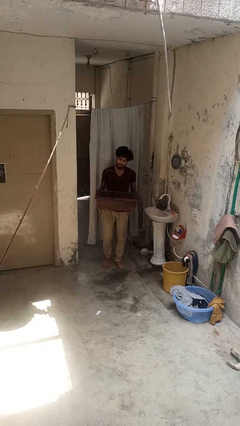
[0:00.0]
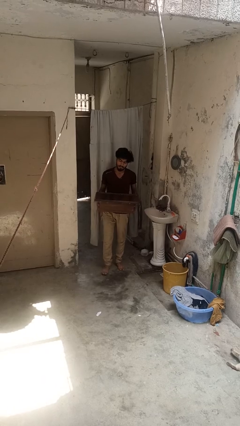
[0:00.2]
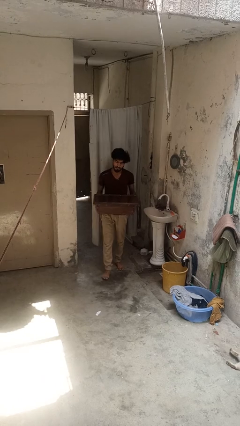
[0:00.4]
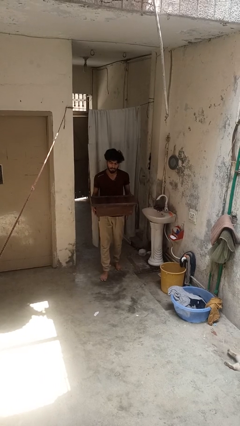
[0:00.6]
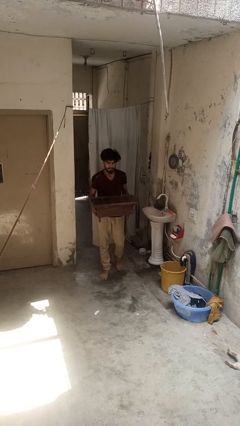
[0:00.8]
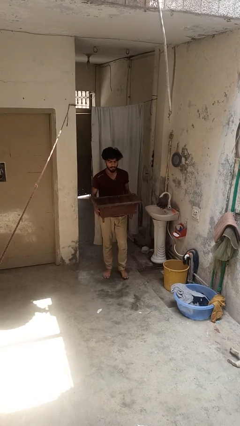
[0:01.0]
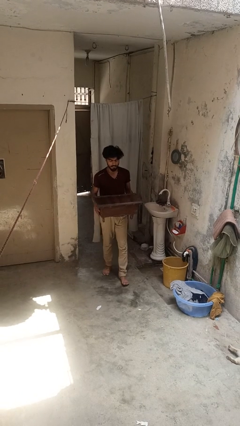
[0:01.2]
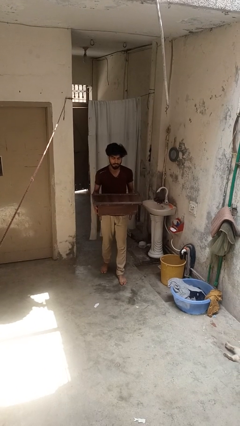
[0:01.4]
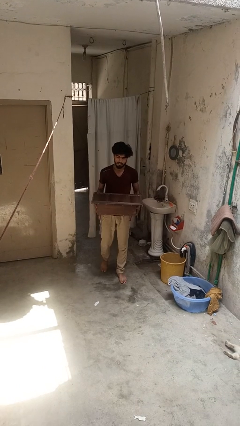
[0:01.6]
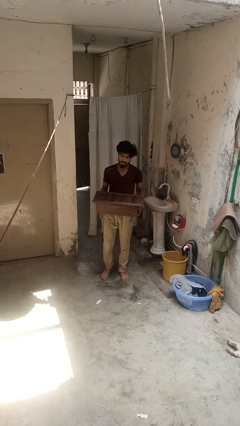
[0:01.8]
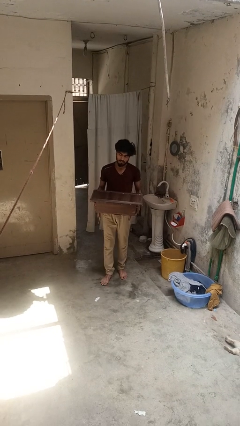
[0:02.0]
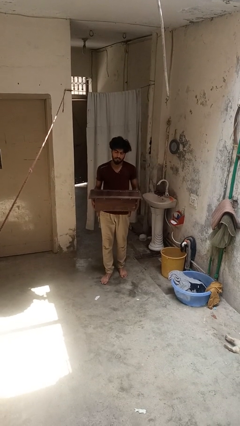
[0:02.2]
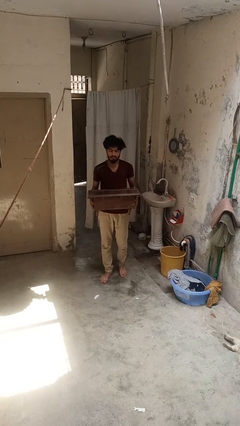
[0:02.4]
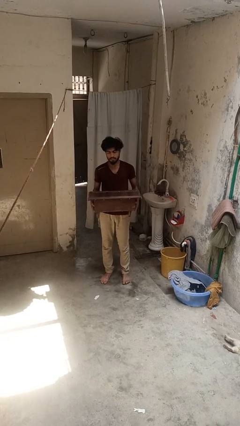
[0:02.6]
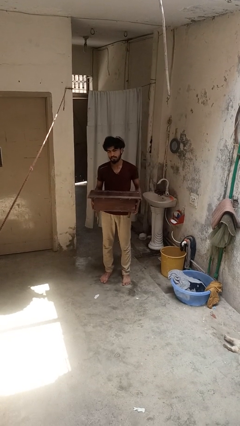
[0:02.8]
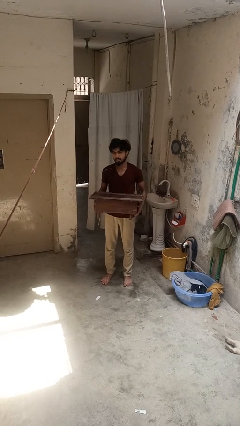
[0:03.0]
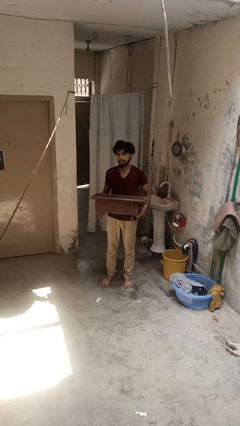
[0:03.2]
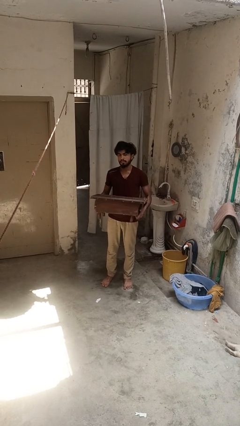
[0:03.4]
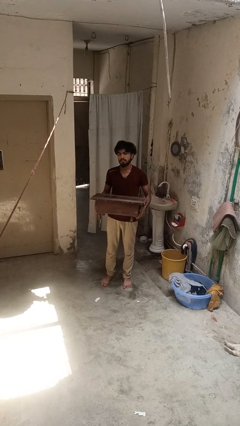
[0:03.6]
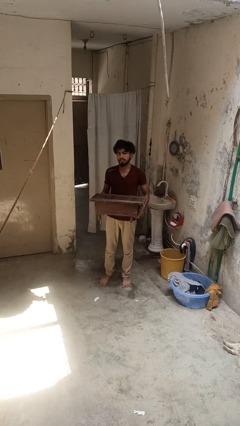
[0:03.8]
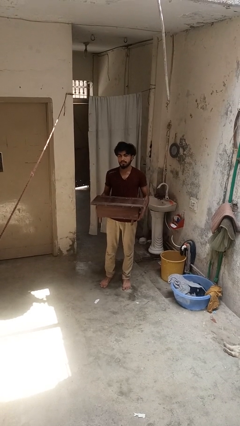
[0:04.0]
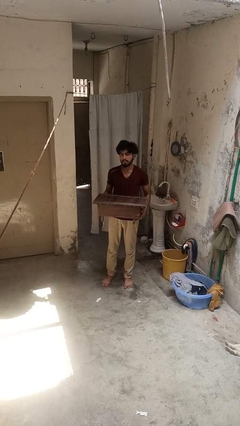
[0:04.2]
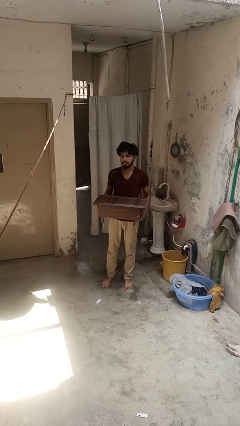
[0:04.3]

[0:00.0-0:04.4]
person carries furniture

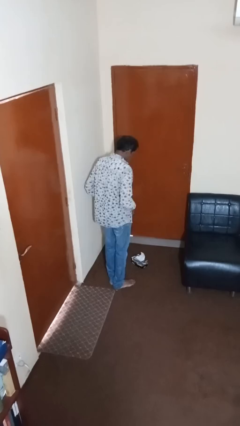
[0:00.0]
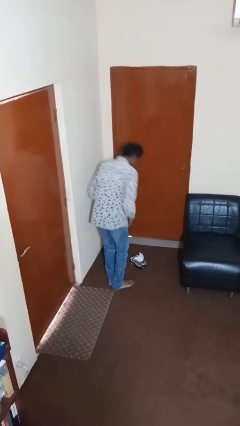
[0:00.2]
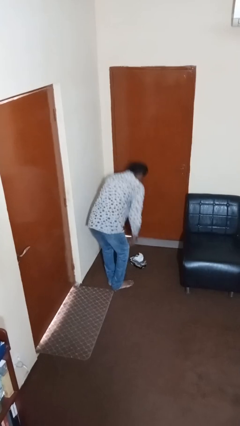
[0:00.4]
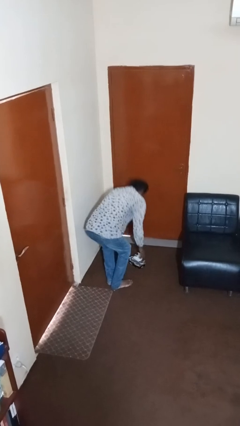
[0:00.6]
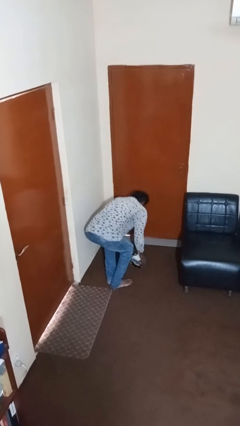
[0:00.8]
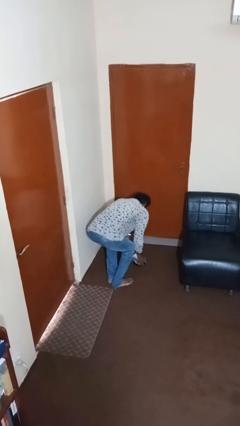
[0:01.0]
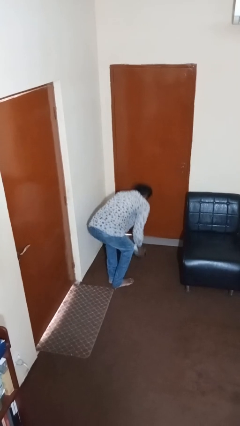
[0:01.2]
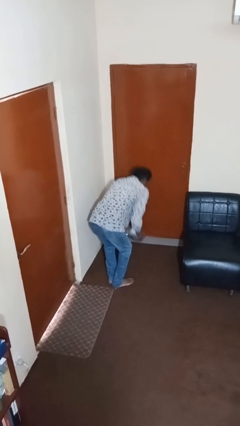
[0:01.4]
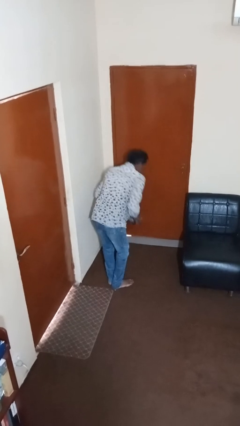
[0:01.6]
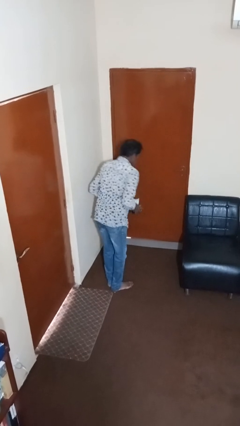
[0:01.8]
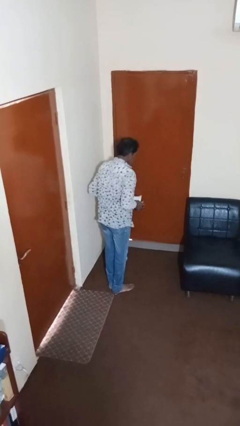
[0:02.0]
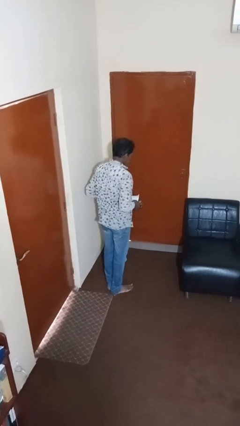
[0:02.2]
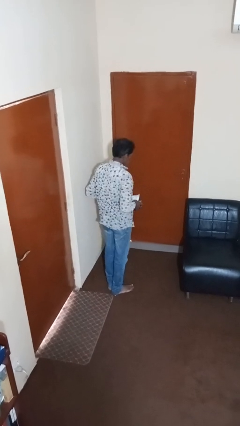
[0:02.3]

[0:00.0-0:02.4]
person picks up object from floor

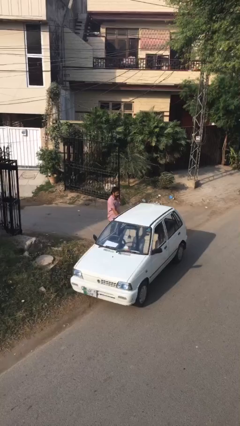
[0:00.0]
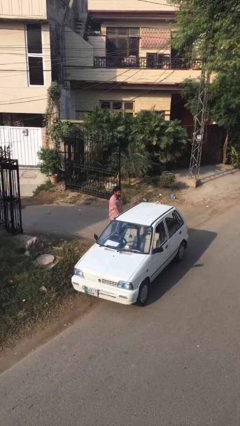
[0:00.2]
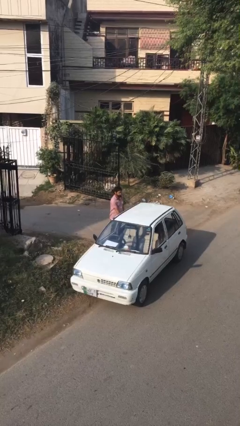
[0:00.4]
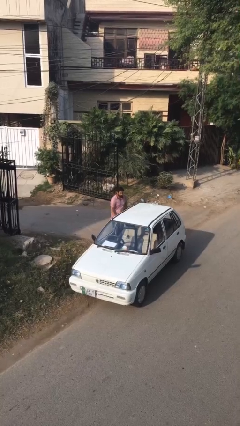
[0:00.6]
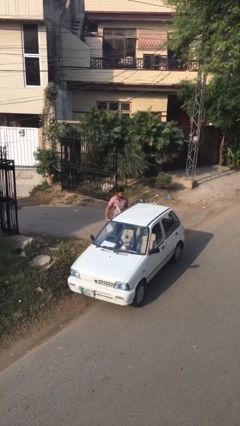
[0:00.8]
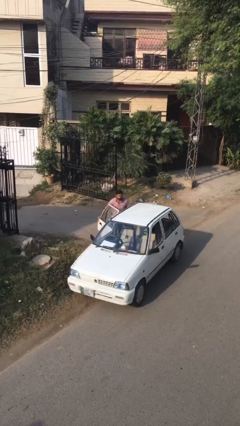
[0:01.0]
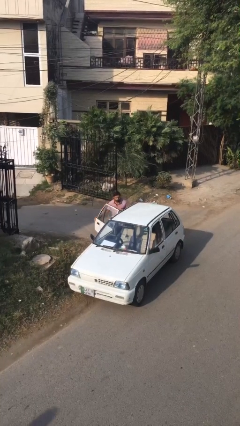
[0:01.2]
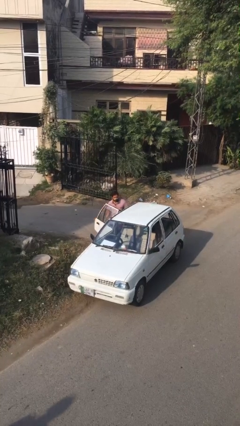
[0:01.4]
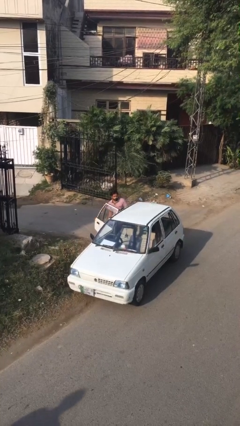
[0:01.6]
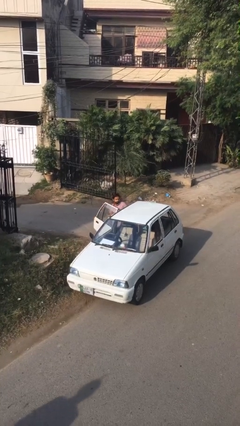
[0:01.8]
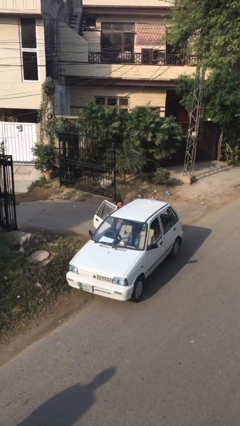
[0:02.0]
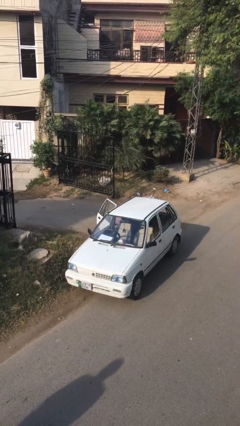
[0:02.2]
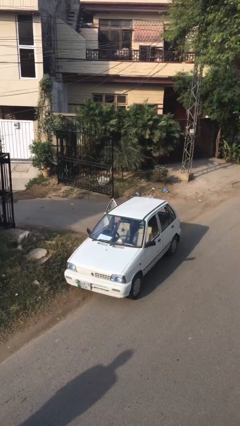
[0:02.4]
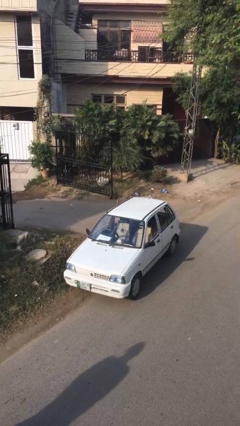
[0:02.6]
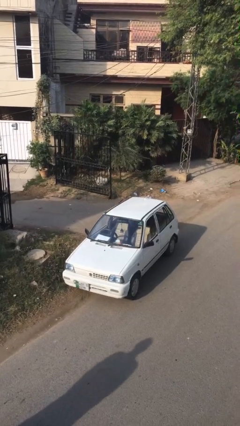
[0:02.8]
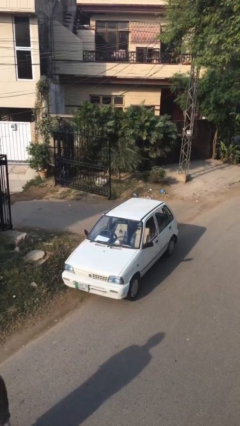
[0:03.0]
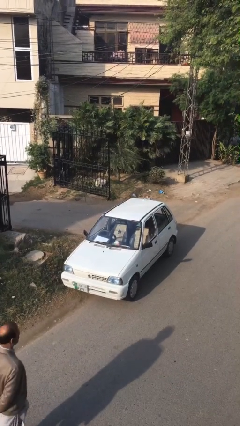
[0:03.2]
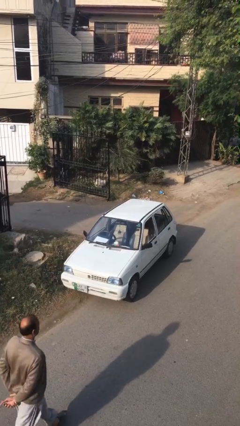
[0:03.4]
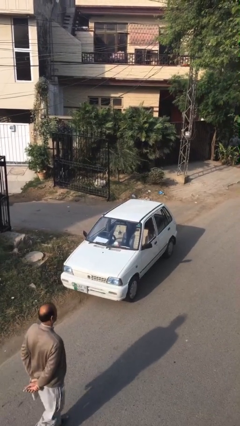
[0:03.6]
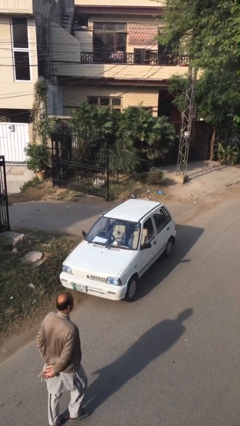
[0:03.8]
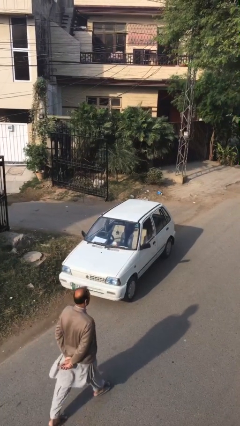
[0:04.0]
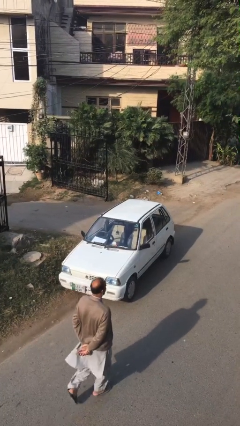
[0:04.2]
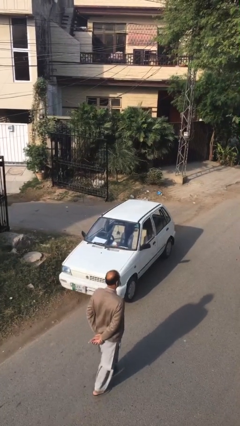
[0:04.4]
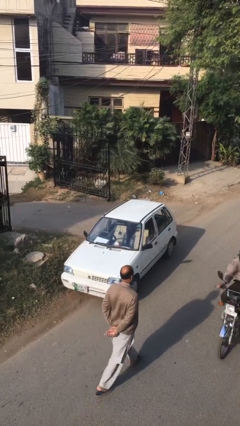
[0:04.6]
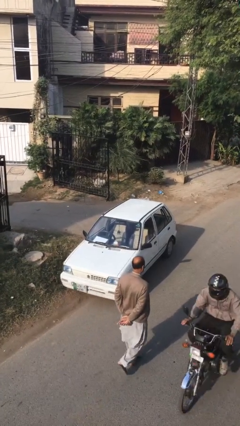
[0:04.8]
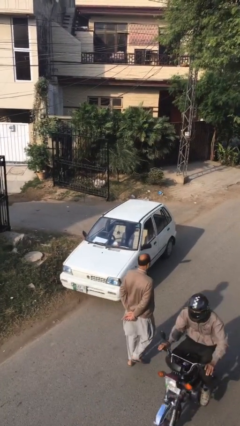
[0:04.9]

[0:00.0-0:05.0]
person enters car

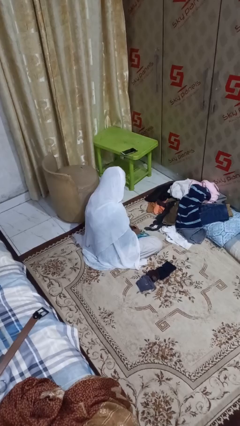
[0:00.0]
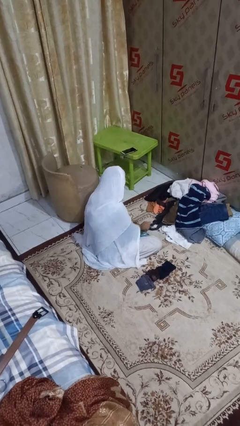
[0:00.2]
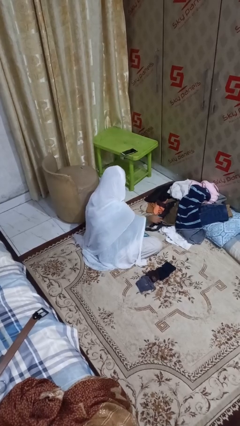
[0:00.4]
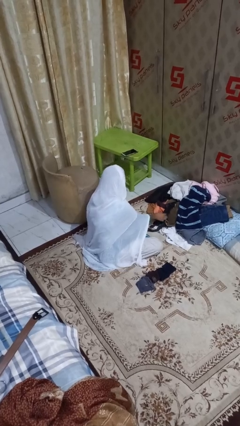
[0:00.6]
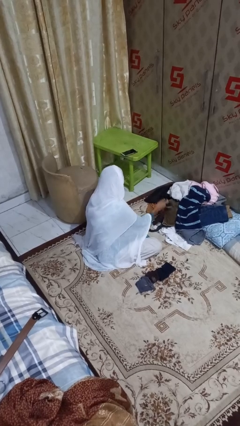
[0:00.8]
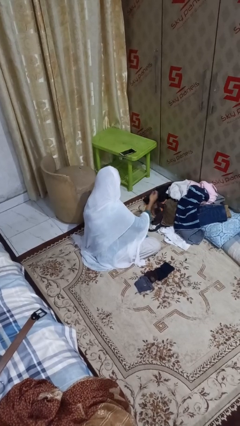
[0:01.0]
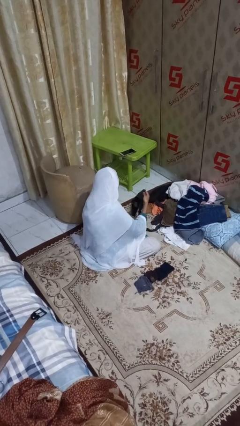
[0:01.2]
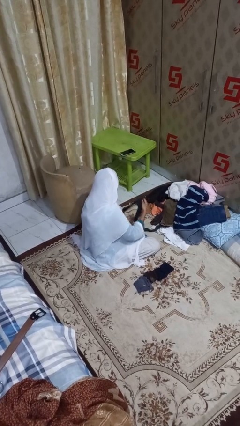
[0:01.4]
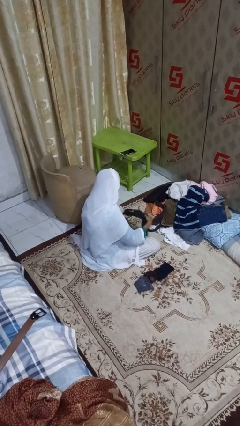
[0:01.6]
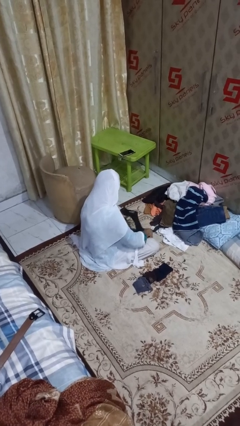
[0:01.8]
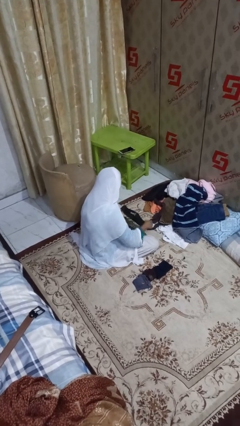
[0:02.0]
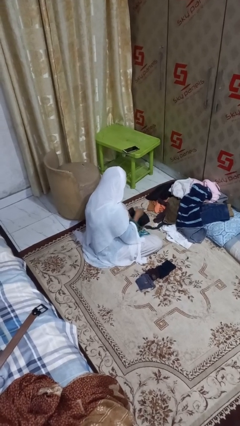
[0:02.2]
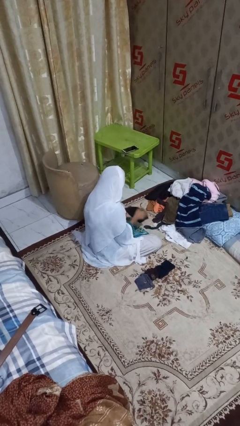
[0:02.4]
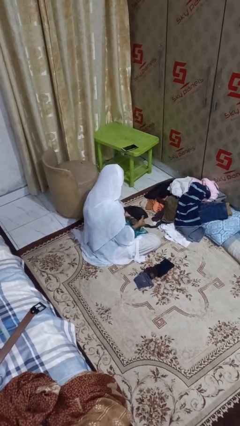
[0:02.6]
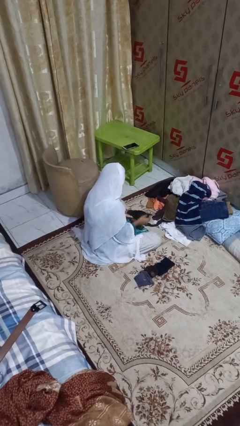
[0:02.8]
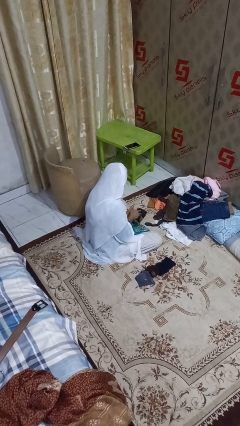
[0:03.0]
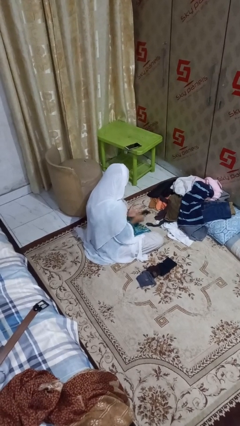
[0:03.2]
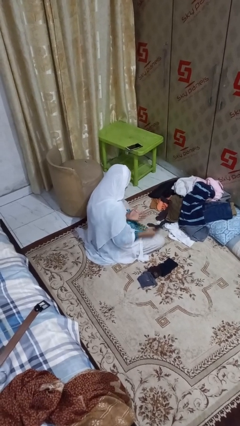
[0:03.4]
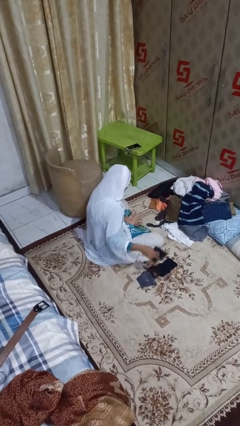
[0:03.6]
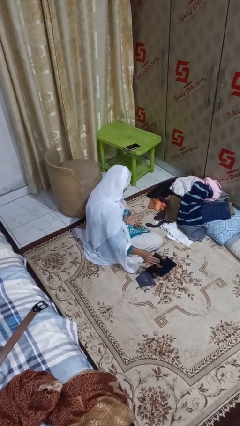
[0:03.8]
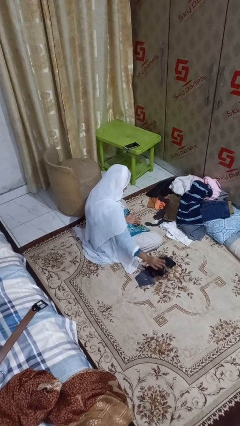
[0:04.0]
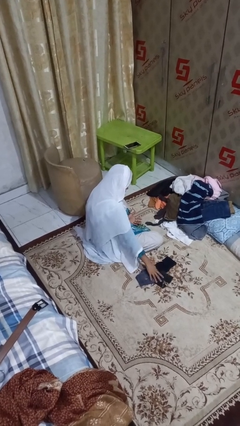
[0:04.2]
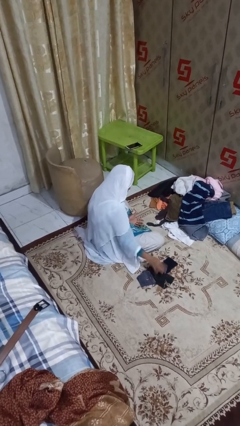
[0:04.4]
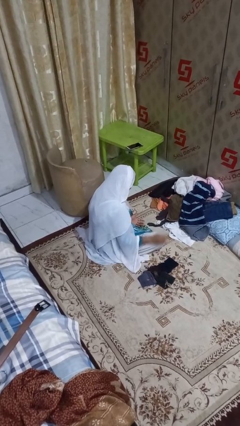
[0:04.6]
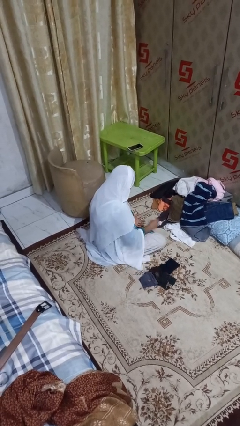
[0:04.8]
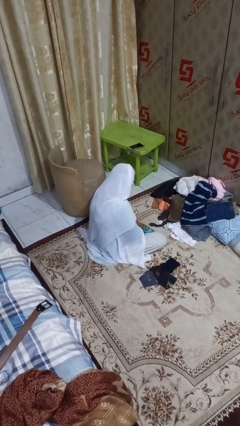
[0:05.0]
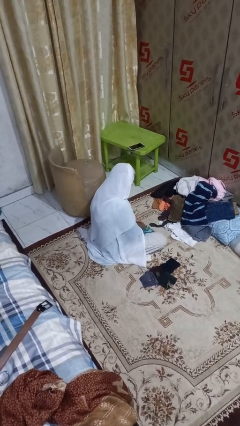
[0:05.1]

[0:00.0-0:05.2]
person folds socks

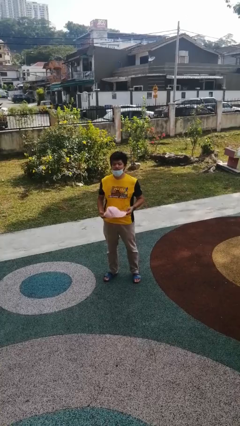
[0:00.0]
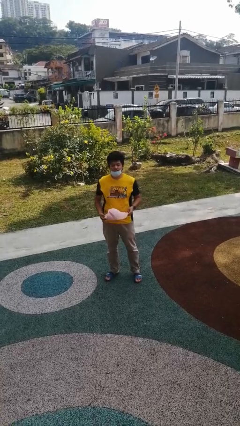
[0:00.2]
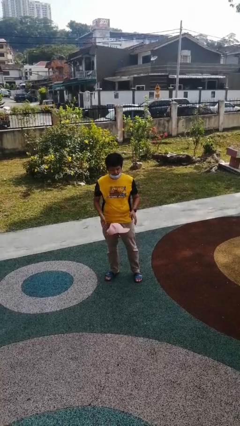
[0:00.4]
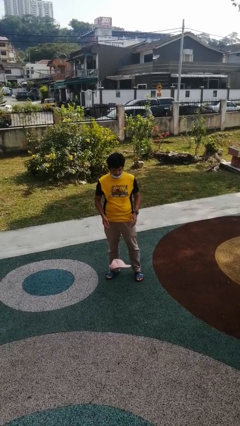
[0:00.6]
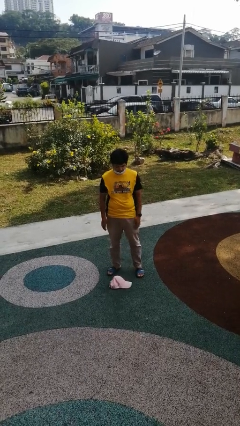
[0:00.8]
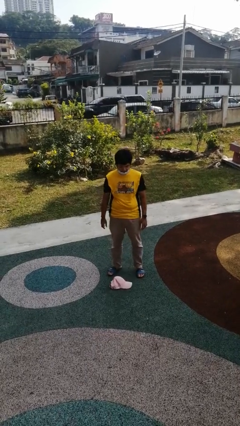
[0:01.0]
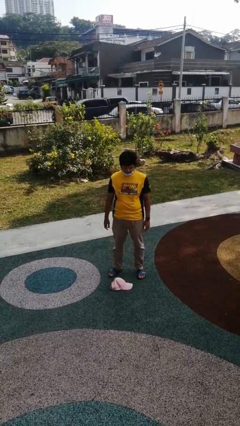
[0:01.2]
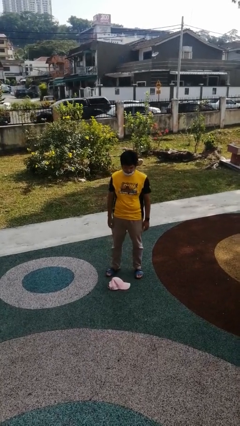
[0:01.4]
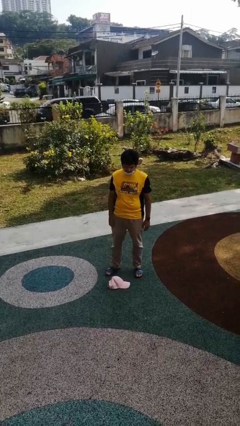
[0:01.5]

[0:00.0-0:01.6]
person drops object
